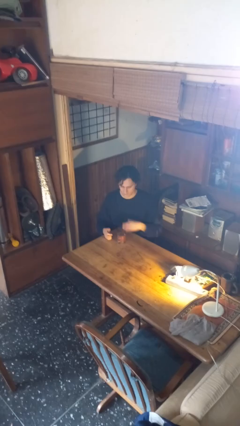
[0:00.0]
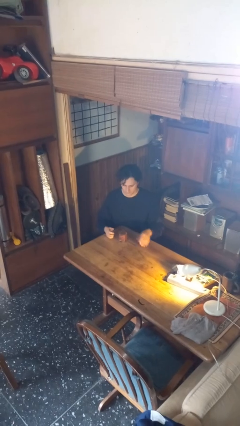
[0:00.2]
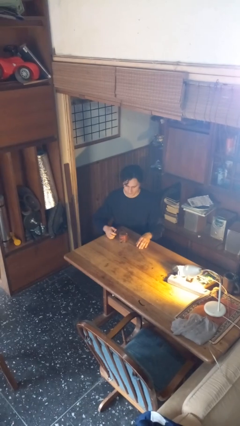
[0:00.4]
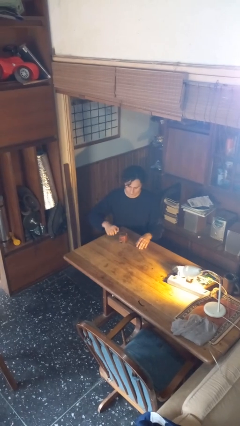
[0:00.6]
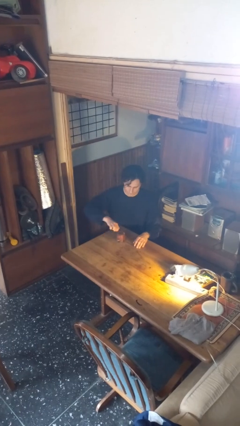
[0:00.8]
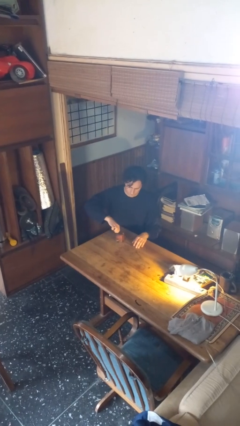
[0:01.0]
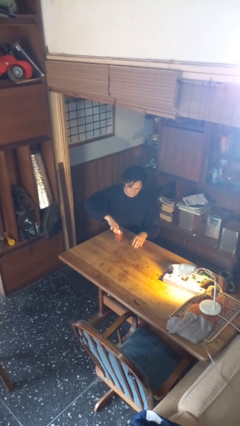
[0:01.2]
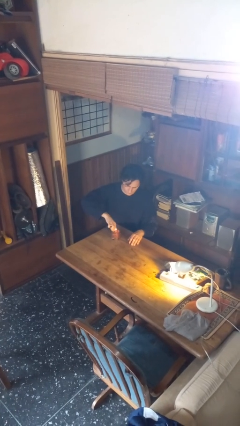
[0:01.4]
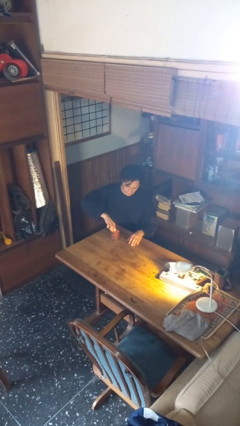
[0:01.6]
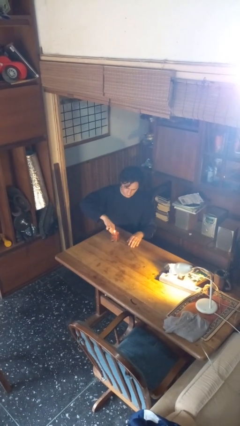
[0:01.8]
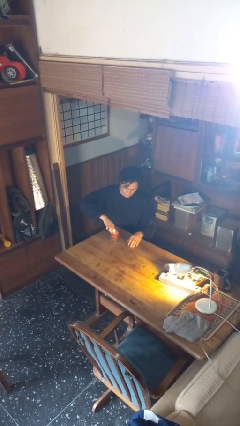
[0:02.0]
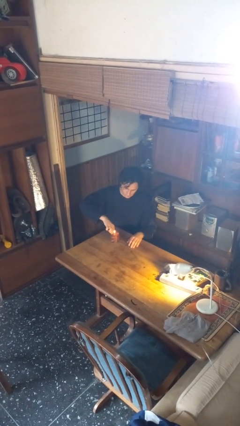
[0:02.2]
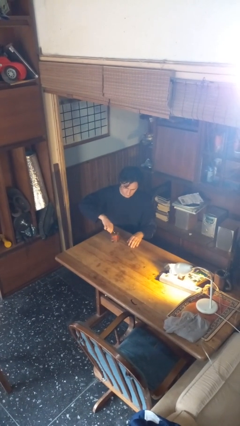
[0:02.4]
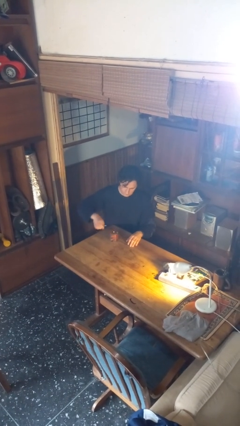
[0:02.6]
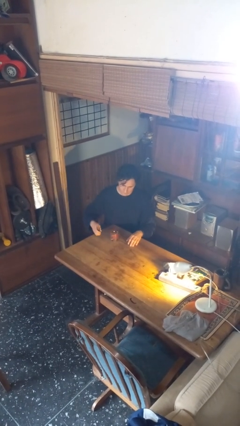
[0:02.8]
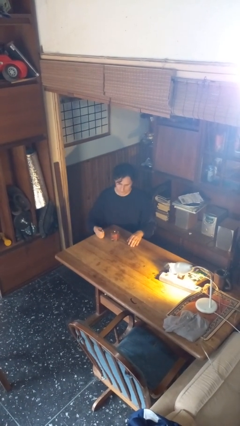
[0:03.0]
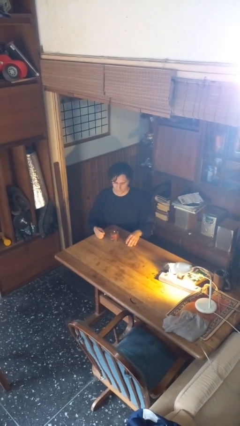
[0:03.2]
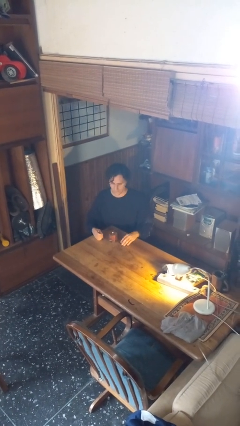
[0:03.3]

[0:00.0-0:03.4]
person lights candle

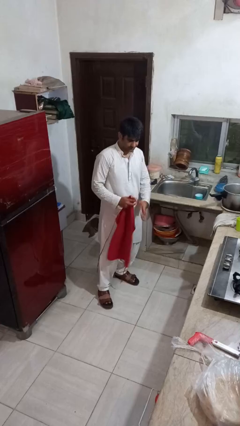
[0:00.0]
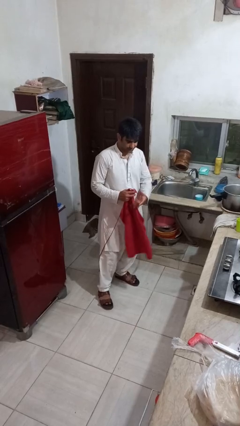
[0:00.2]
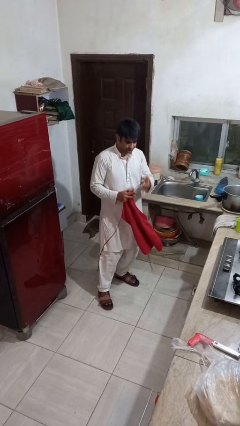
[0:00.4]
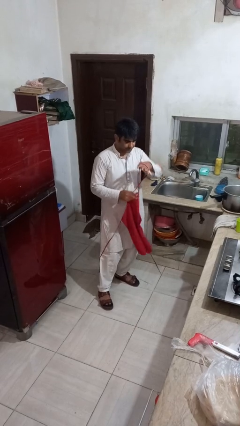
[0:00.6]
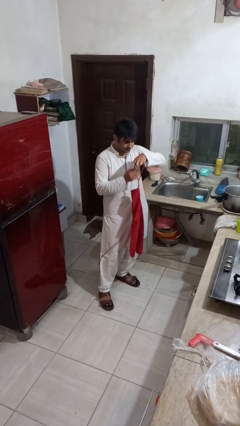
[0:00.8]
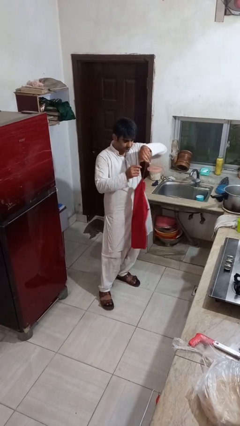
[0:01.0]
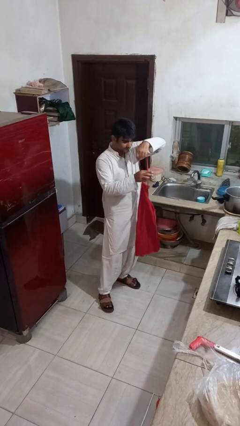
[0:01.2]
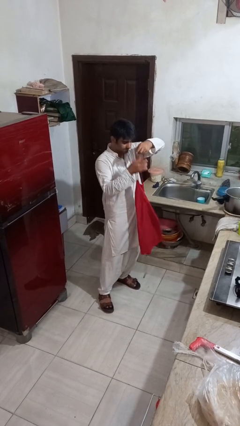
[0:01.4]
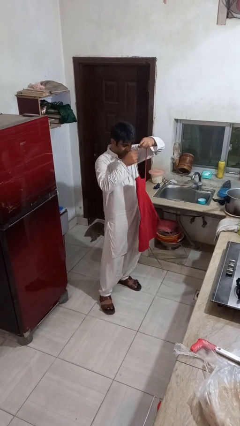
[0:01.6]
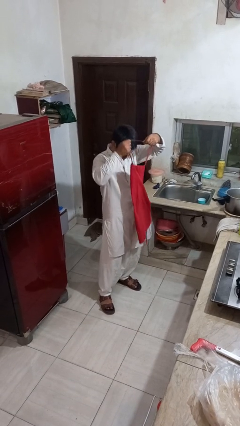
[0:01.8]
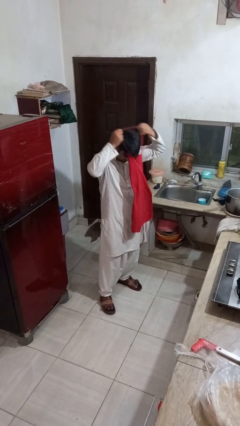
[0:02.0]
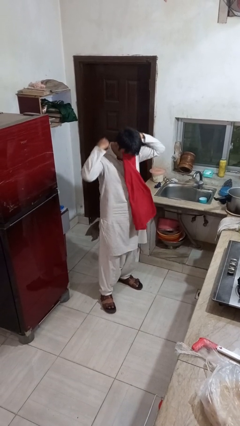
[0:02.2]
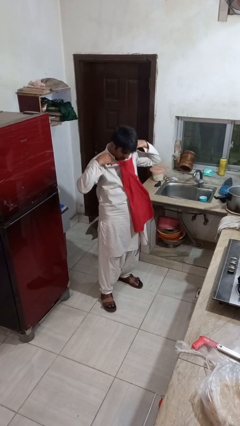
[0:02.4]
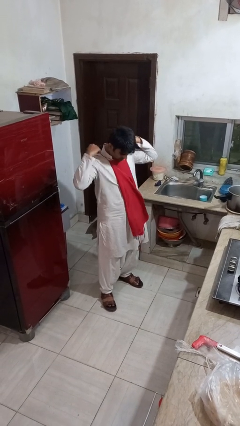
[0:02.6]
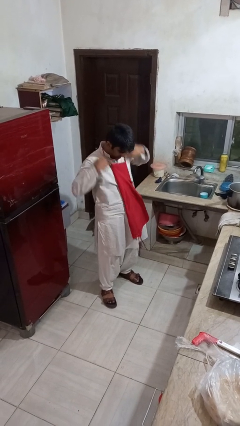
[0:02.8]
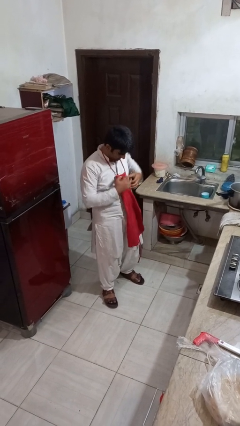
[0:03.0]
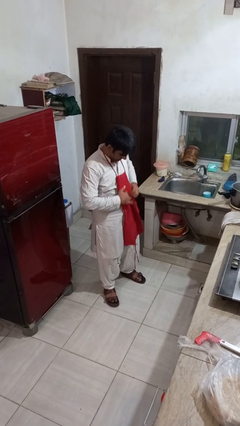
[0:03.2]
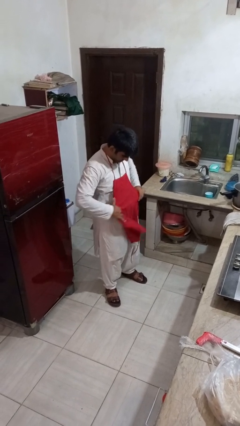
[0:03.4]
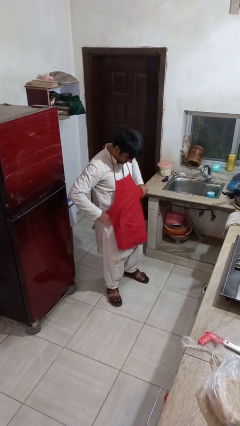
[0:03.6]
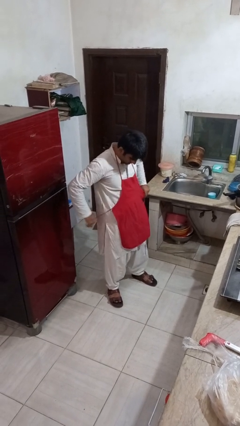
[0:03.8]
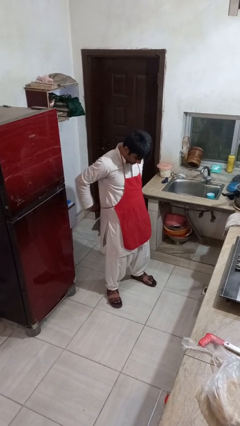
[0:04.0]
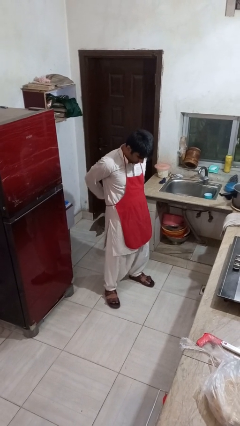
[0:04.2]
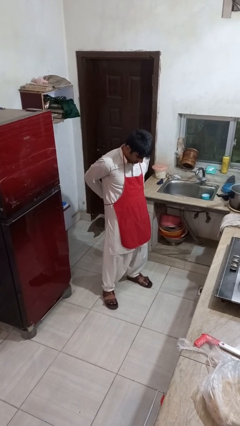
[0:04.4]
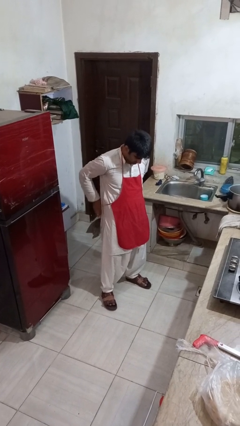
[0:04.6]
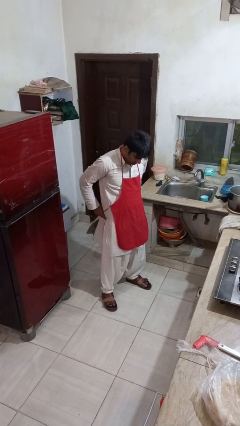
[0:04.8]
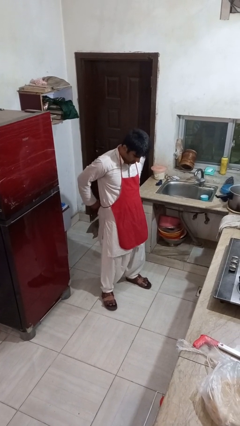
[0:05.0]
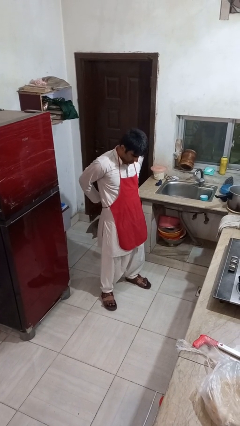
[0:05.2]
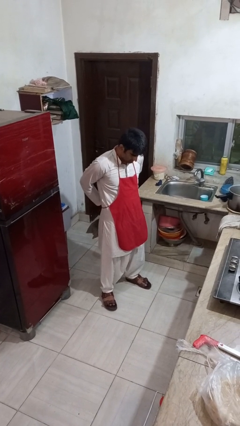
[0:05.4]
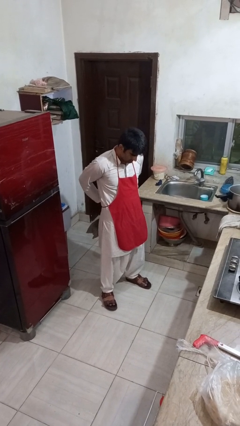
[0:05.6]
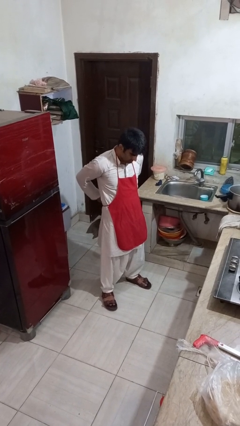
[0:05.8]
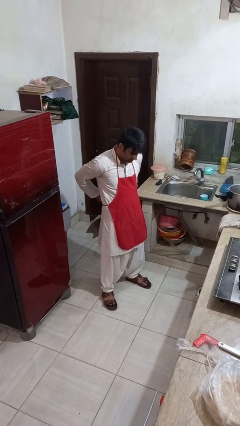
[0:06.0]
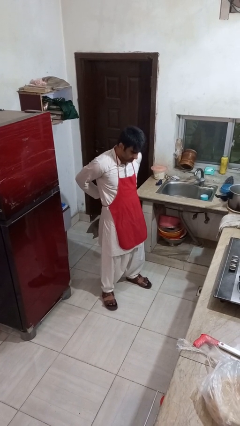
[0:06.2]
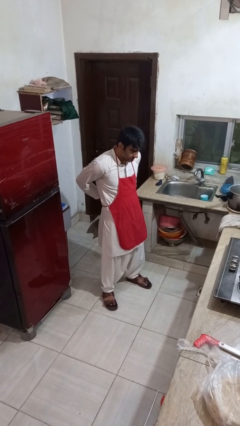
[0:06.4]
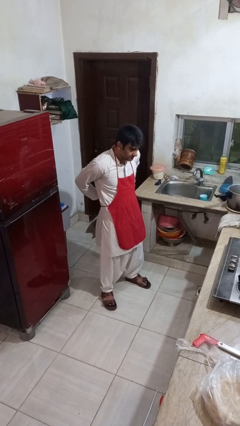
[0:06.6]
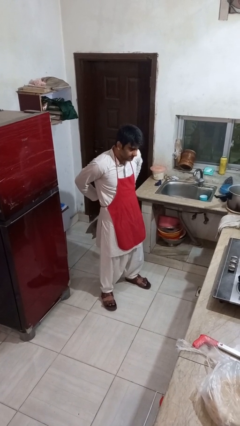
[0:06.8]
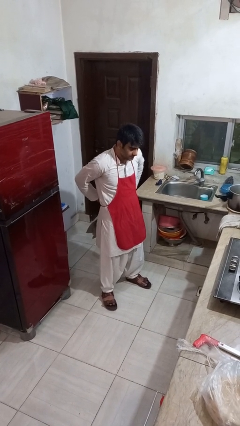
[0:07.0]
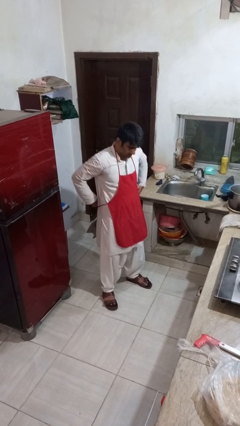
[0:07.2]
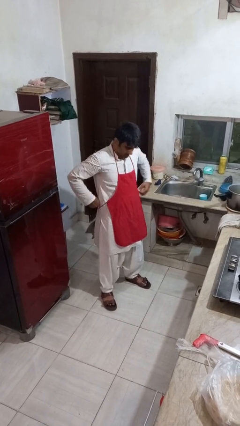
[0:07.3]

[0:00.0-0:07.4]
person puts on apron

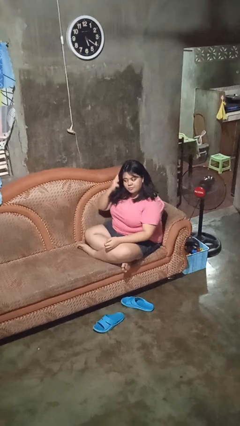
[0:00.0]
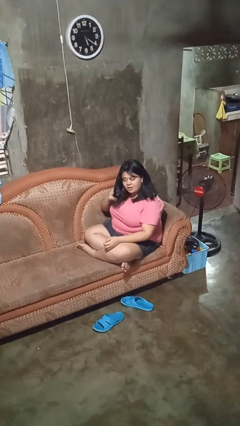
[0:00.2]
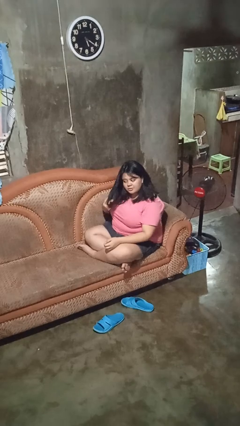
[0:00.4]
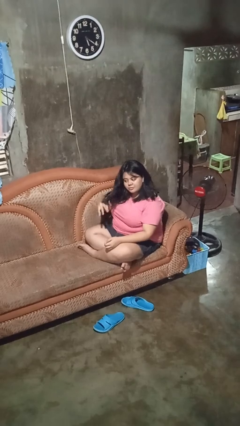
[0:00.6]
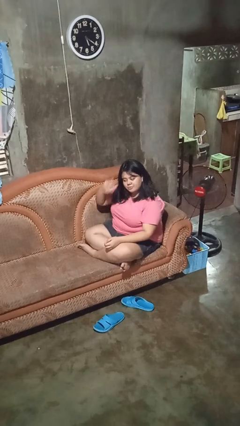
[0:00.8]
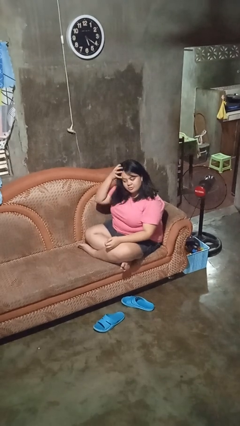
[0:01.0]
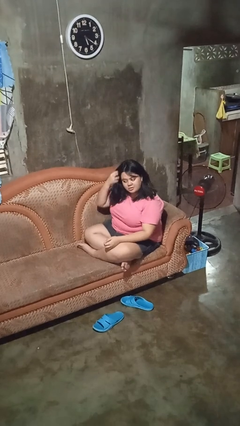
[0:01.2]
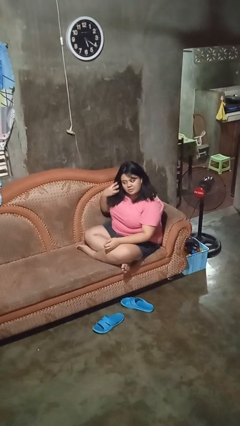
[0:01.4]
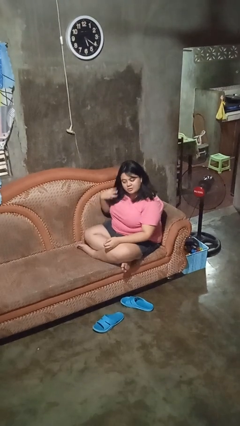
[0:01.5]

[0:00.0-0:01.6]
person strokes hair

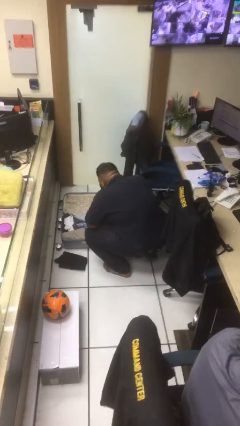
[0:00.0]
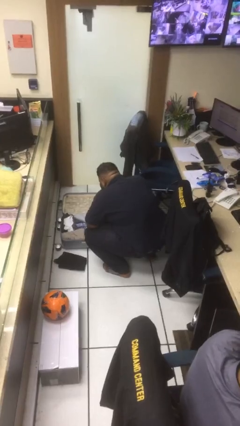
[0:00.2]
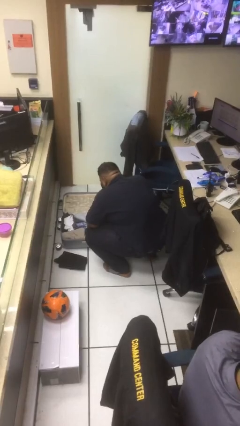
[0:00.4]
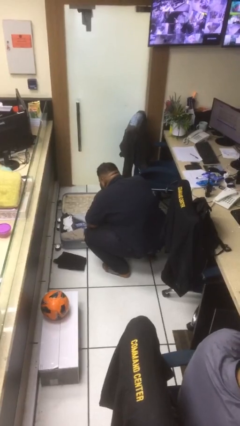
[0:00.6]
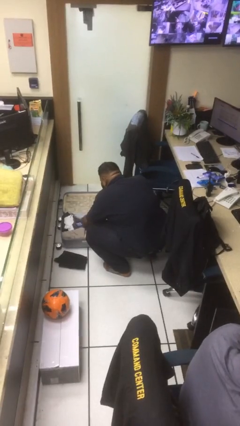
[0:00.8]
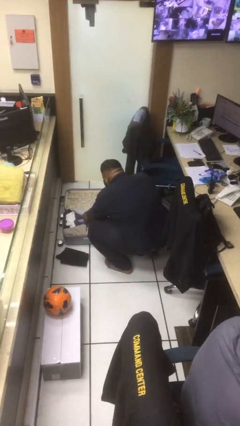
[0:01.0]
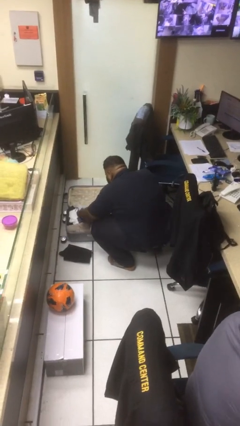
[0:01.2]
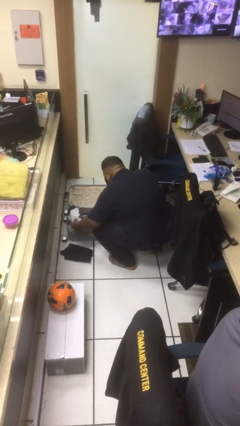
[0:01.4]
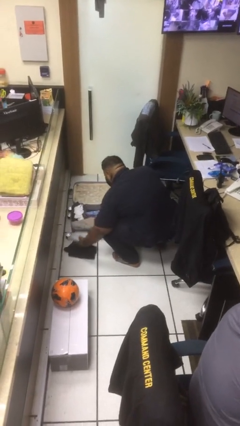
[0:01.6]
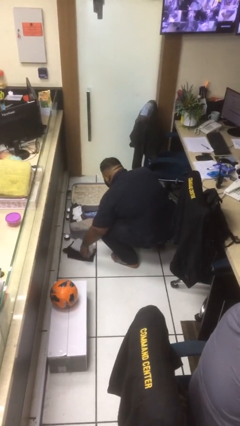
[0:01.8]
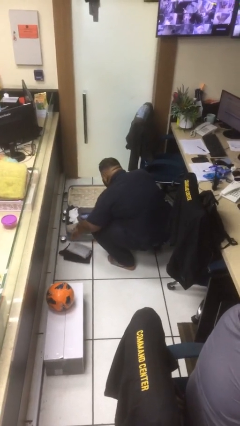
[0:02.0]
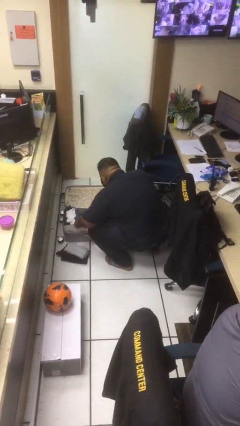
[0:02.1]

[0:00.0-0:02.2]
person unloads clothes from suitcase

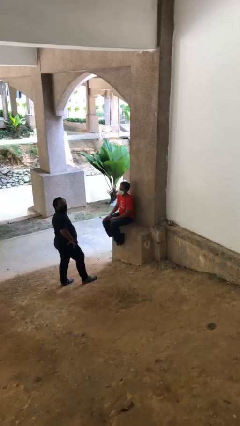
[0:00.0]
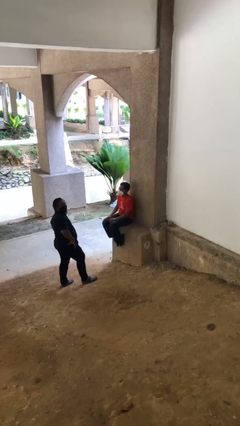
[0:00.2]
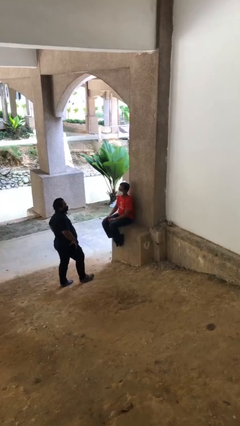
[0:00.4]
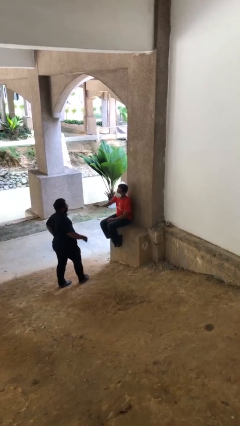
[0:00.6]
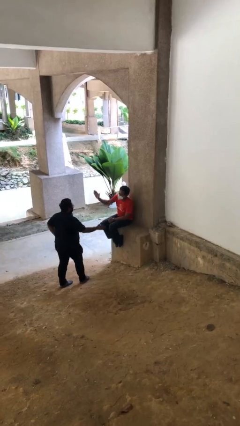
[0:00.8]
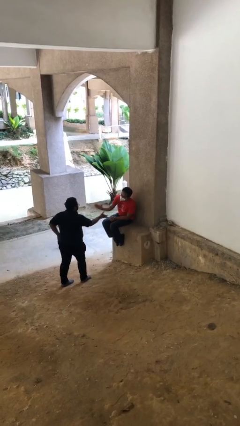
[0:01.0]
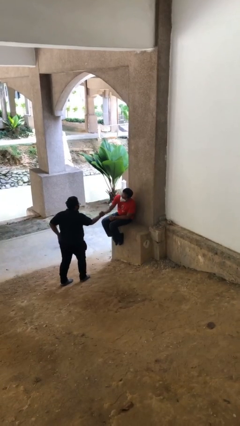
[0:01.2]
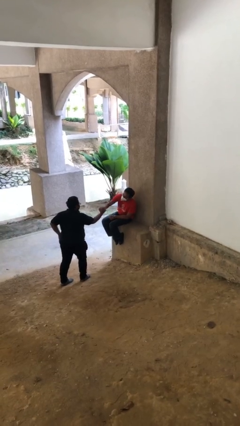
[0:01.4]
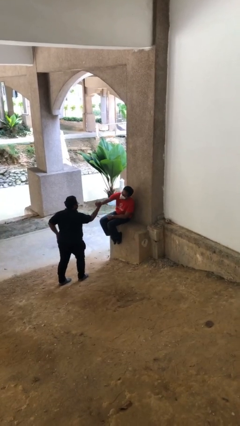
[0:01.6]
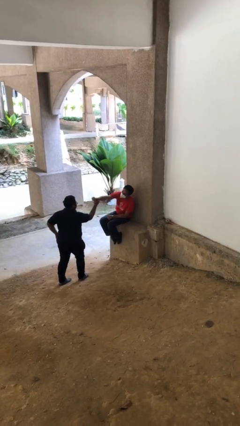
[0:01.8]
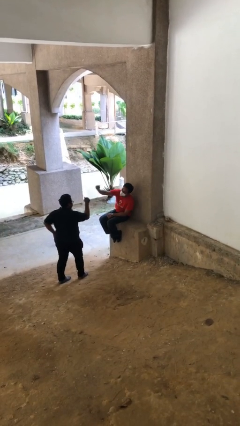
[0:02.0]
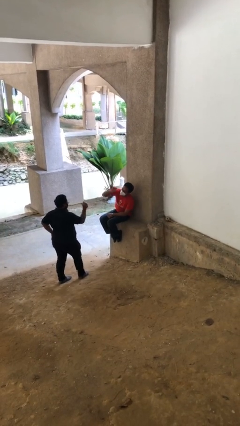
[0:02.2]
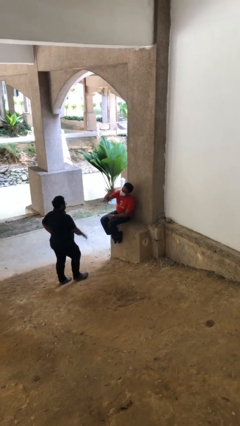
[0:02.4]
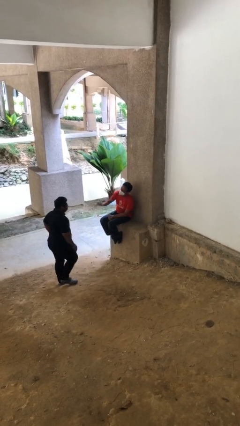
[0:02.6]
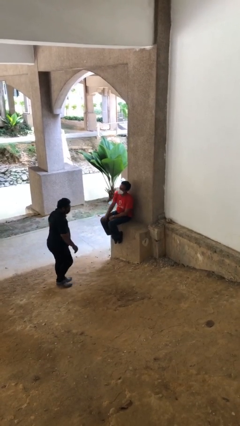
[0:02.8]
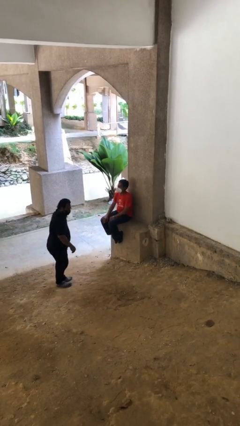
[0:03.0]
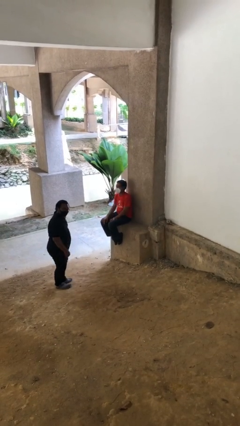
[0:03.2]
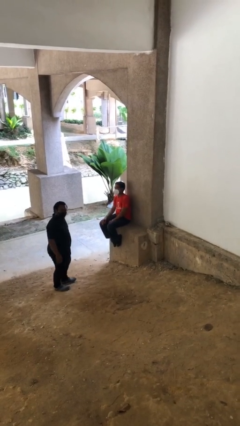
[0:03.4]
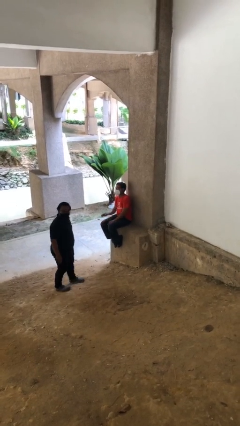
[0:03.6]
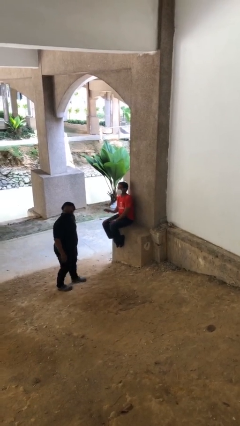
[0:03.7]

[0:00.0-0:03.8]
person shakes hand
